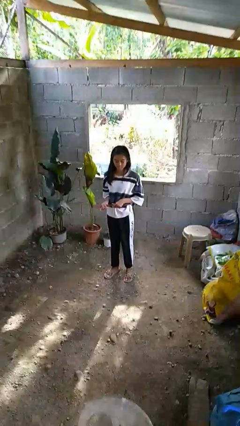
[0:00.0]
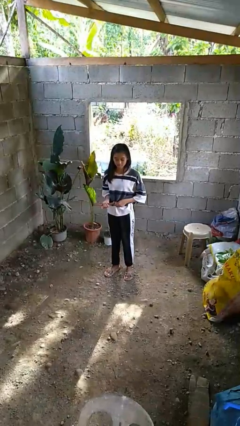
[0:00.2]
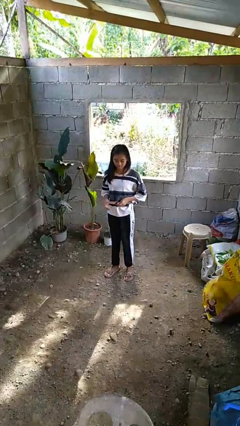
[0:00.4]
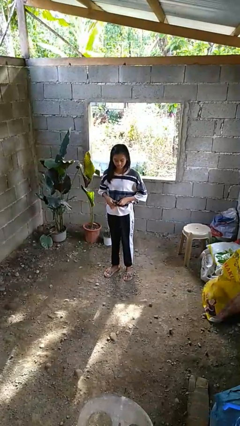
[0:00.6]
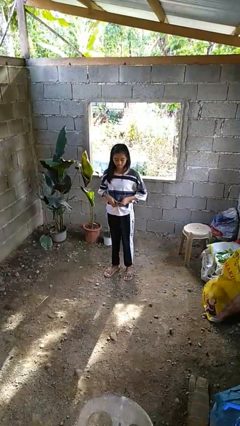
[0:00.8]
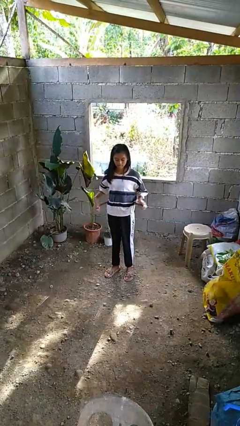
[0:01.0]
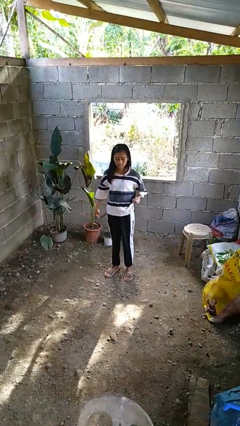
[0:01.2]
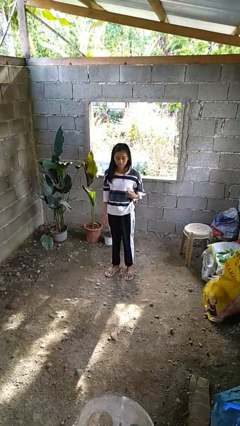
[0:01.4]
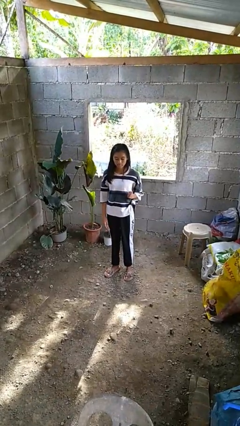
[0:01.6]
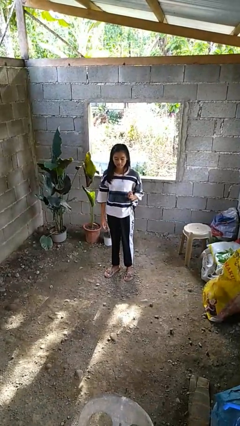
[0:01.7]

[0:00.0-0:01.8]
person takes off belt

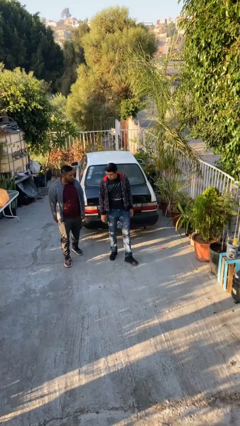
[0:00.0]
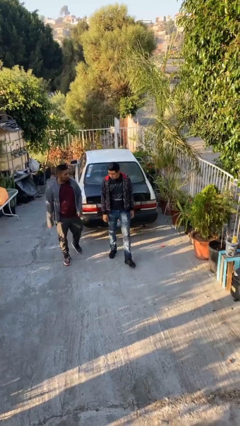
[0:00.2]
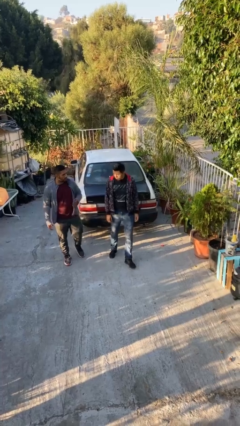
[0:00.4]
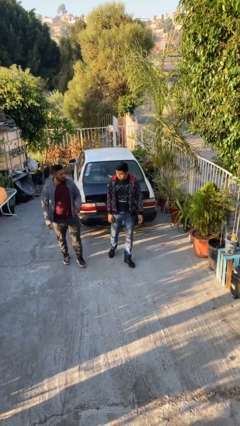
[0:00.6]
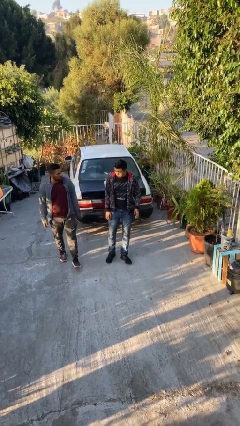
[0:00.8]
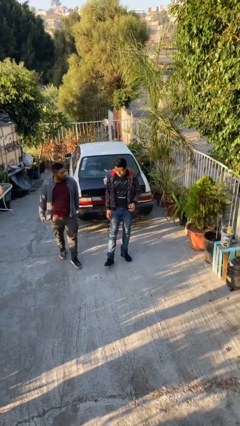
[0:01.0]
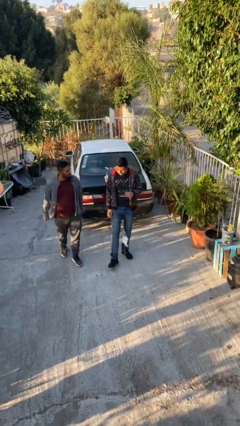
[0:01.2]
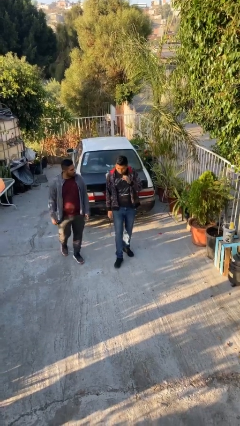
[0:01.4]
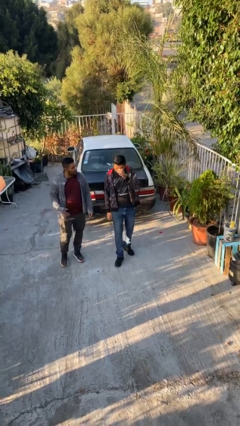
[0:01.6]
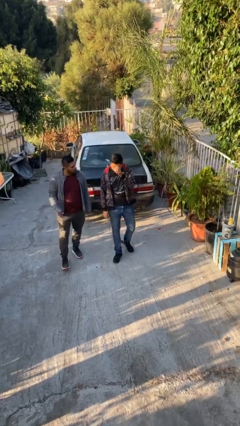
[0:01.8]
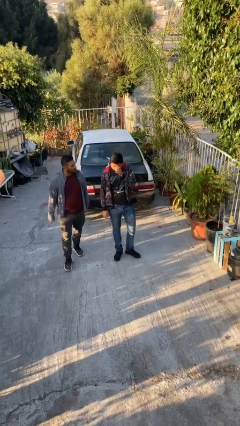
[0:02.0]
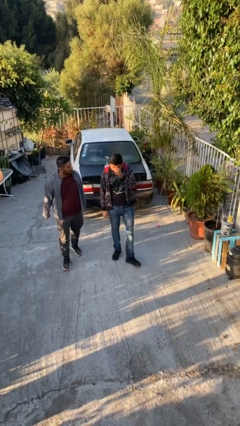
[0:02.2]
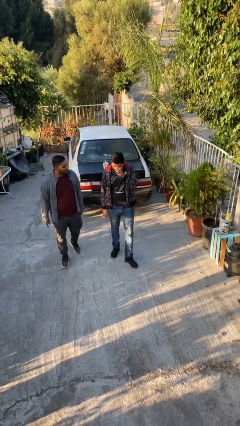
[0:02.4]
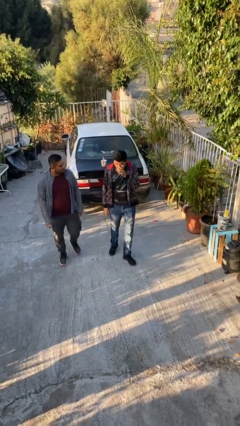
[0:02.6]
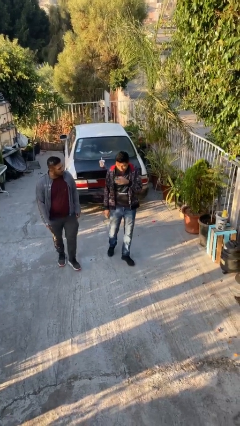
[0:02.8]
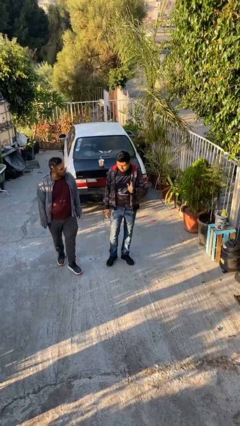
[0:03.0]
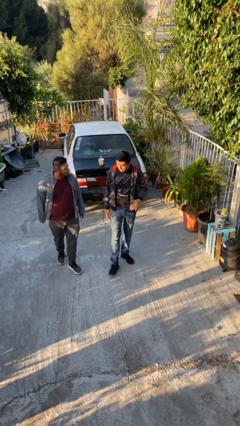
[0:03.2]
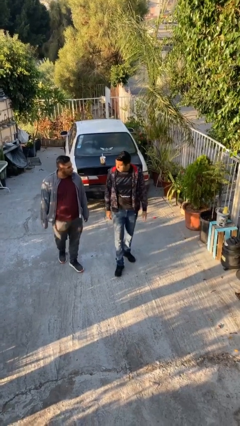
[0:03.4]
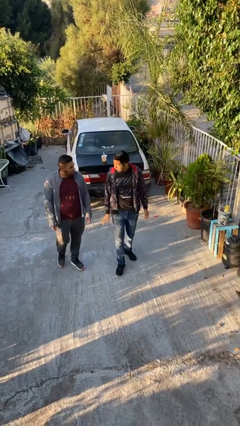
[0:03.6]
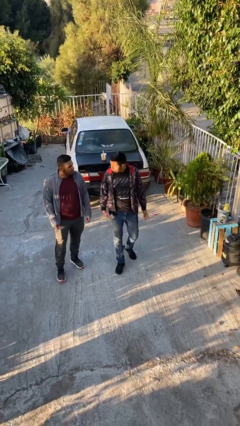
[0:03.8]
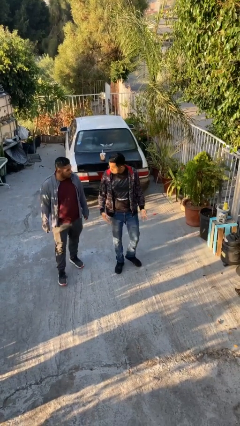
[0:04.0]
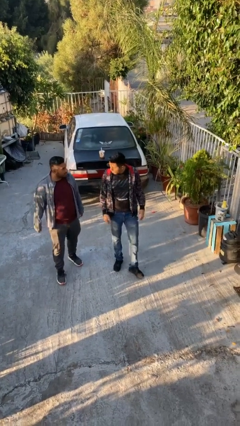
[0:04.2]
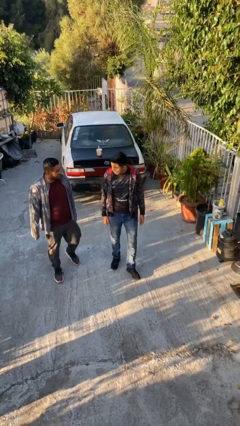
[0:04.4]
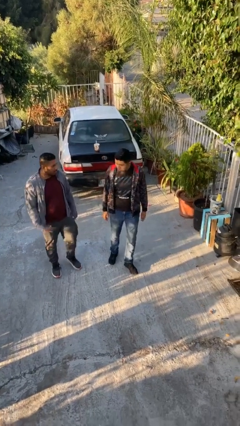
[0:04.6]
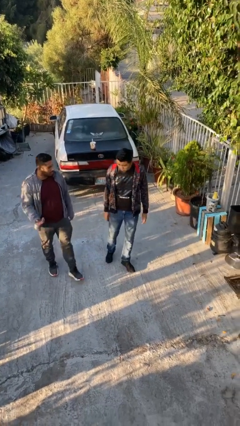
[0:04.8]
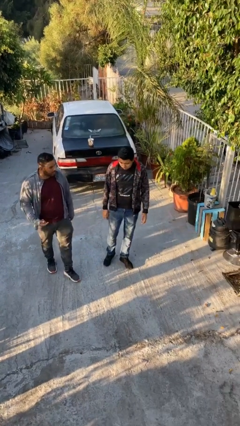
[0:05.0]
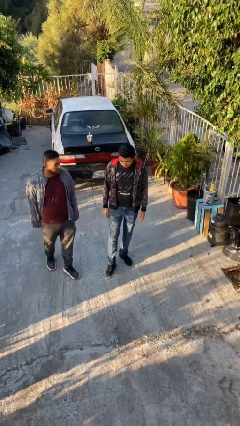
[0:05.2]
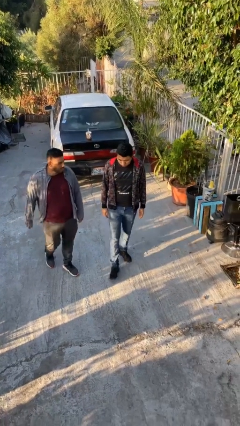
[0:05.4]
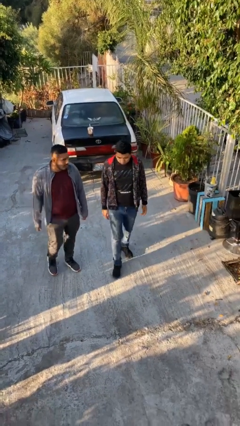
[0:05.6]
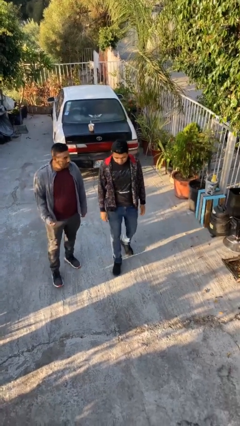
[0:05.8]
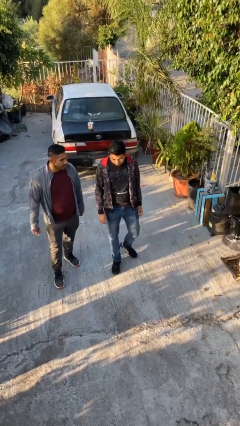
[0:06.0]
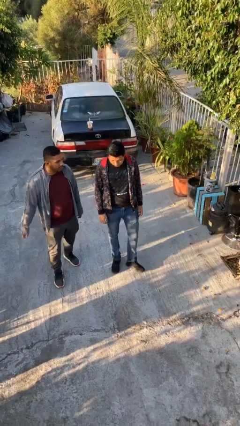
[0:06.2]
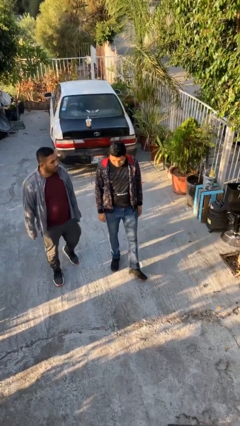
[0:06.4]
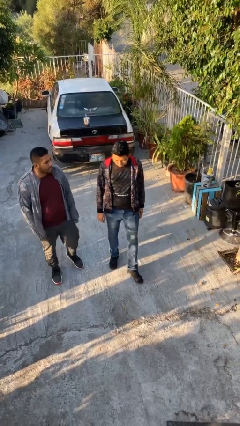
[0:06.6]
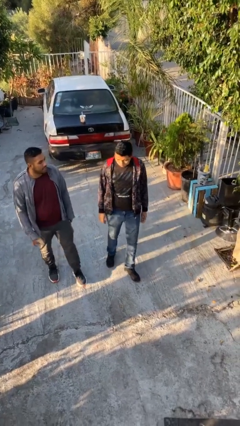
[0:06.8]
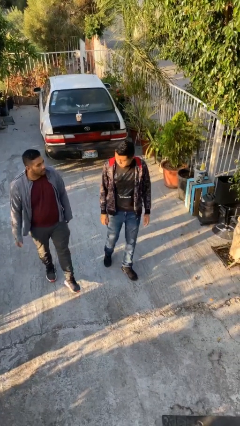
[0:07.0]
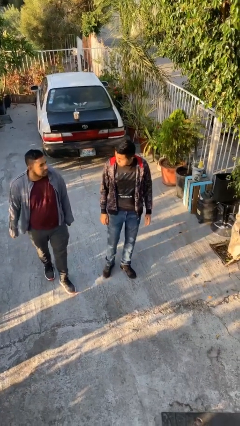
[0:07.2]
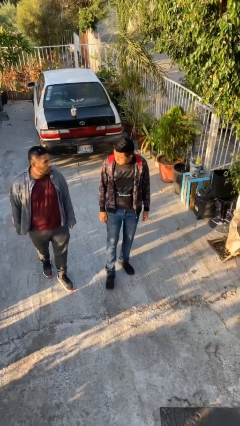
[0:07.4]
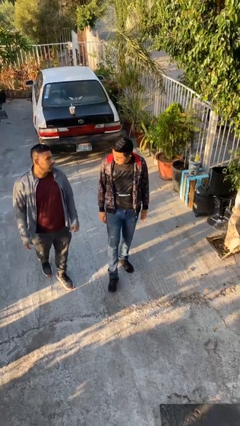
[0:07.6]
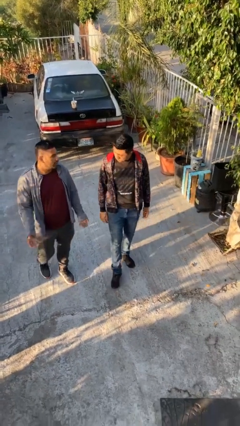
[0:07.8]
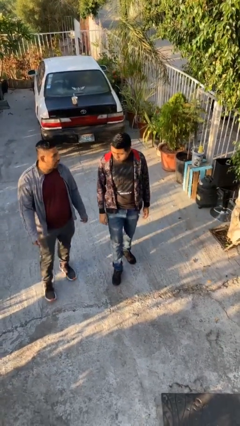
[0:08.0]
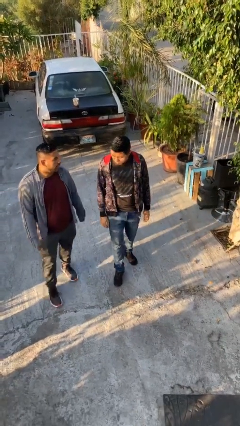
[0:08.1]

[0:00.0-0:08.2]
person talks to person

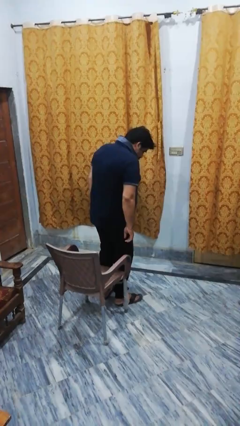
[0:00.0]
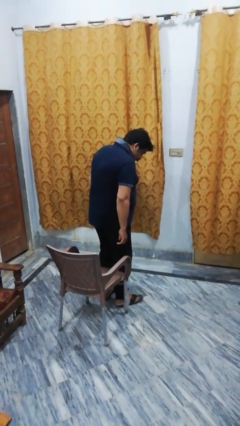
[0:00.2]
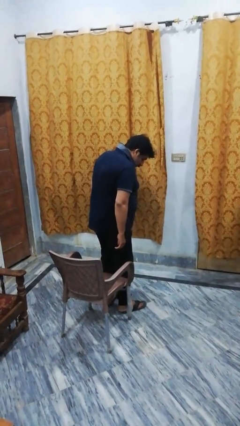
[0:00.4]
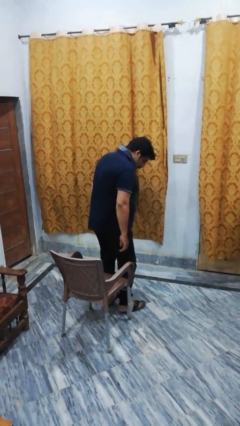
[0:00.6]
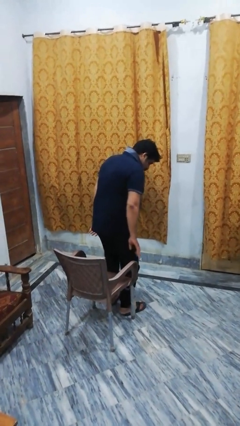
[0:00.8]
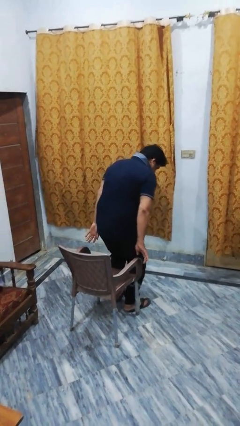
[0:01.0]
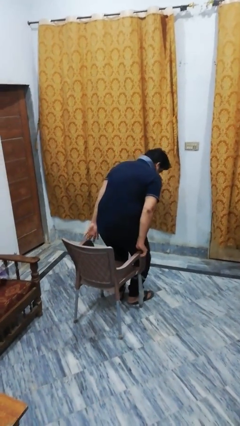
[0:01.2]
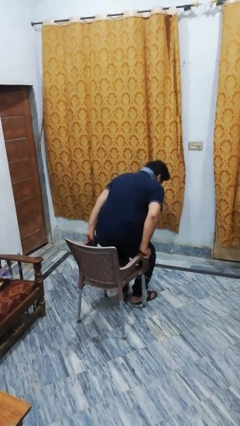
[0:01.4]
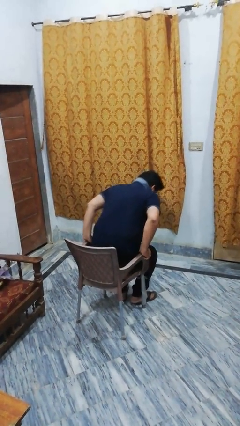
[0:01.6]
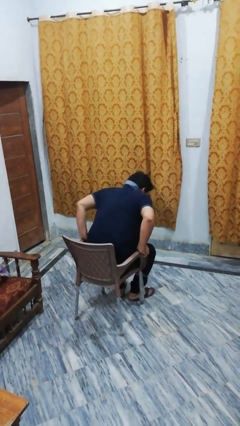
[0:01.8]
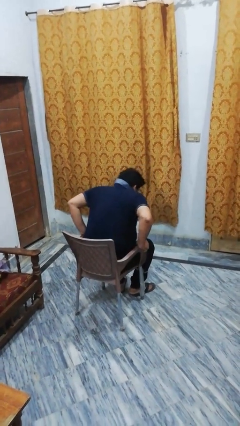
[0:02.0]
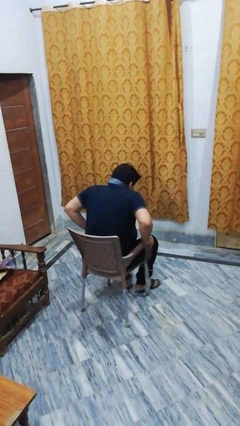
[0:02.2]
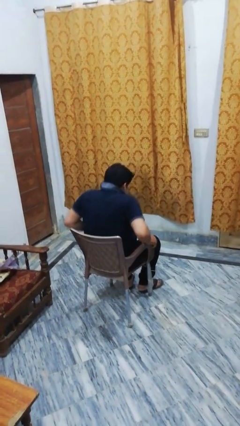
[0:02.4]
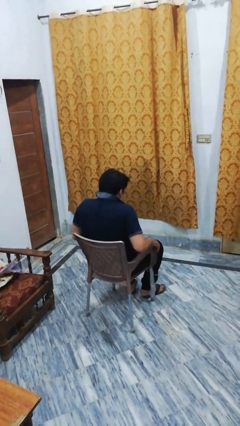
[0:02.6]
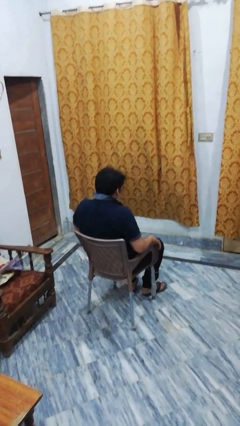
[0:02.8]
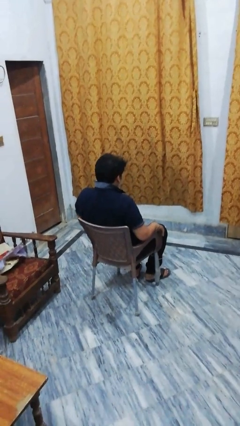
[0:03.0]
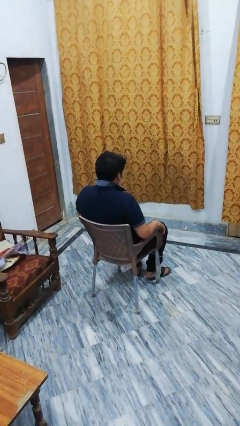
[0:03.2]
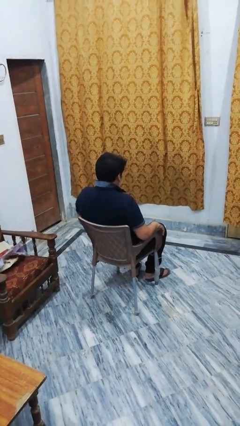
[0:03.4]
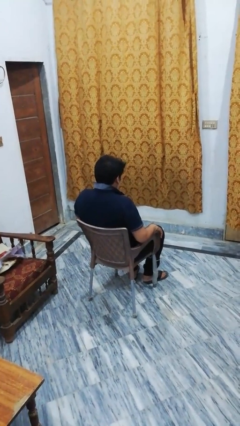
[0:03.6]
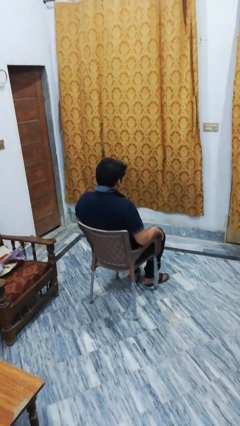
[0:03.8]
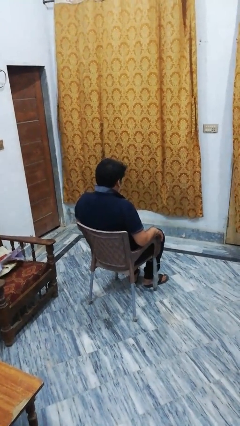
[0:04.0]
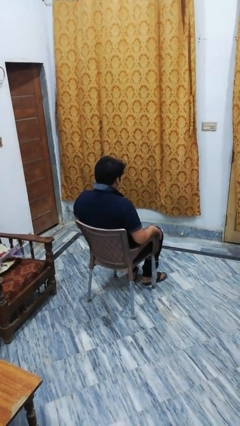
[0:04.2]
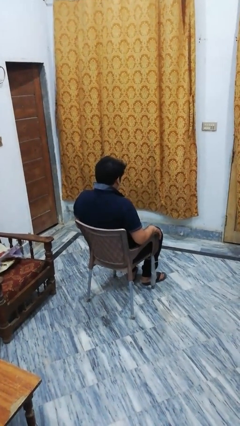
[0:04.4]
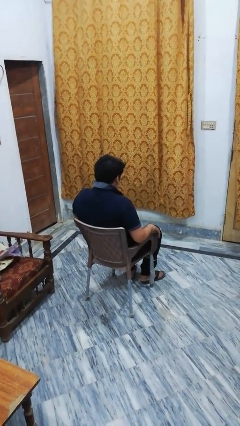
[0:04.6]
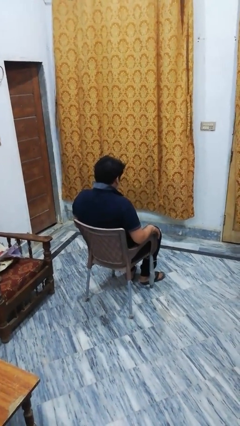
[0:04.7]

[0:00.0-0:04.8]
person sits down

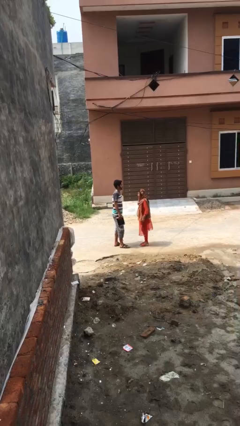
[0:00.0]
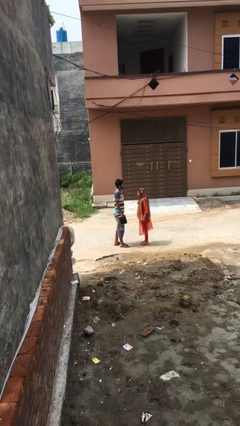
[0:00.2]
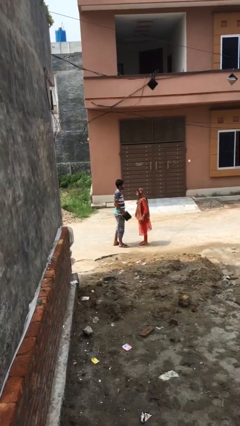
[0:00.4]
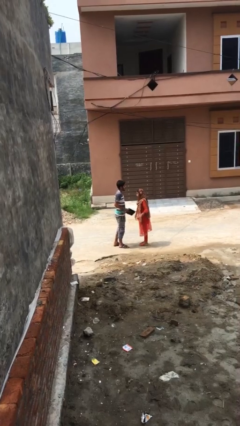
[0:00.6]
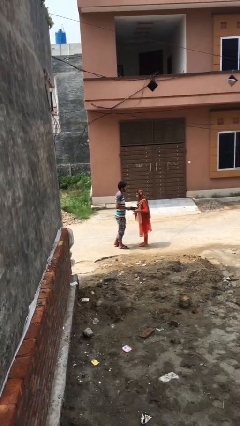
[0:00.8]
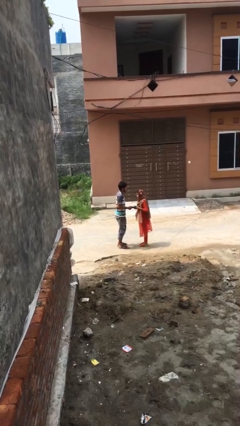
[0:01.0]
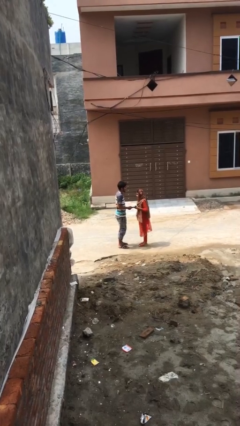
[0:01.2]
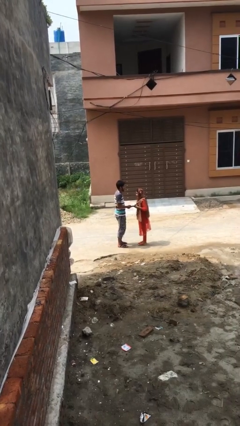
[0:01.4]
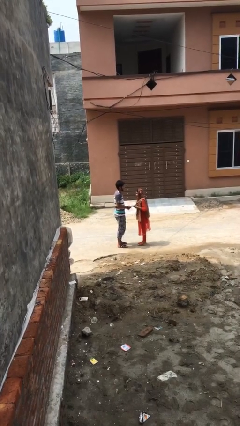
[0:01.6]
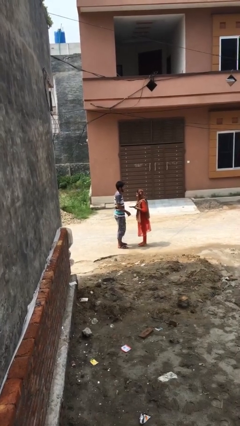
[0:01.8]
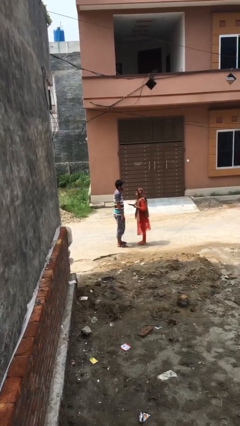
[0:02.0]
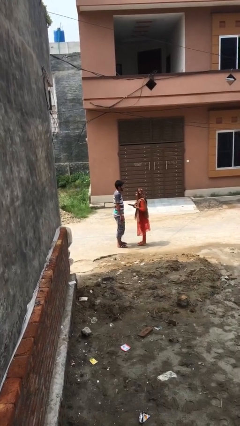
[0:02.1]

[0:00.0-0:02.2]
person transfers object to person

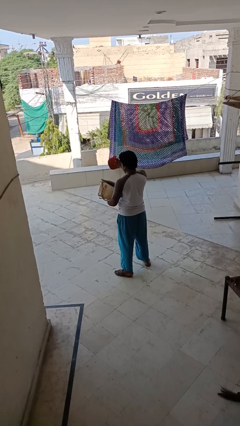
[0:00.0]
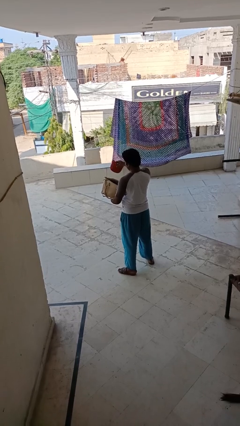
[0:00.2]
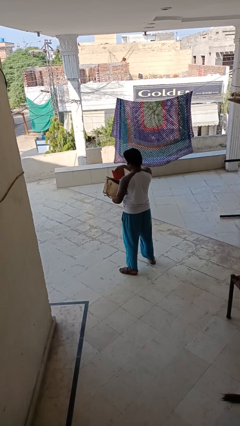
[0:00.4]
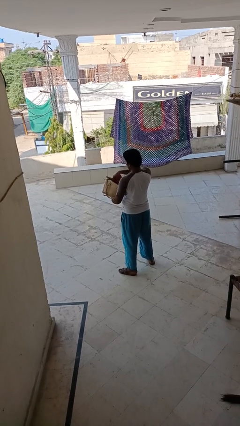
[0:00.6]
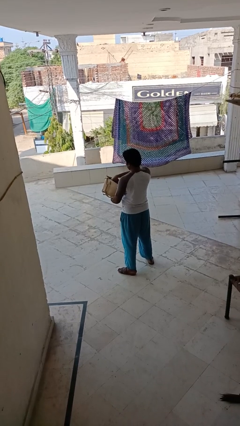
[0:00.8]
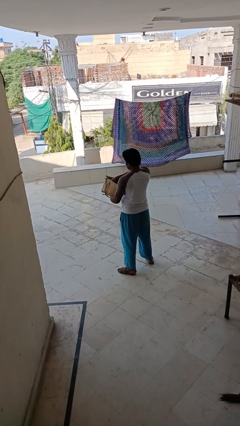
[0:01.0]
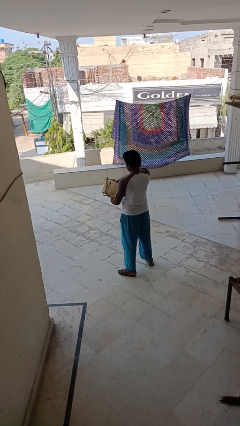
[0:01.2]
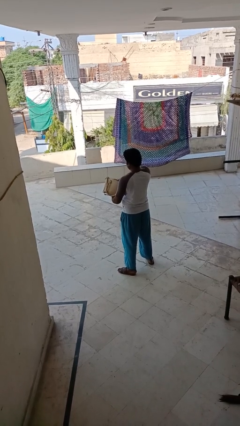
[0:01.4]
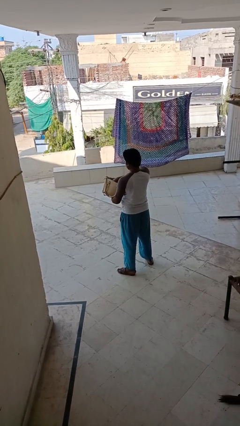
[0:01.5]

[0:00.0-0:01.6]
person puts object into purse
